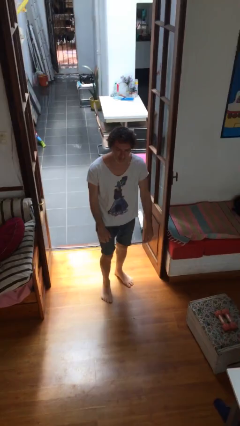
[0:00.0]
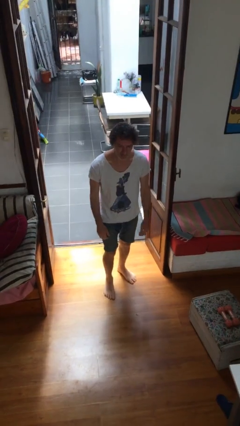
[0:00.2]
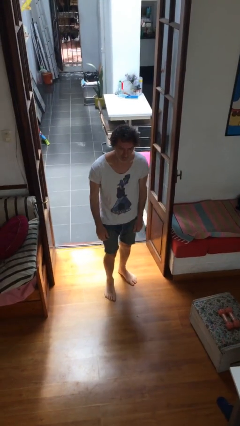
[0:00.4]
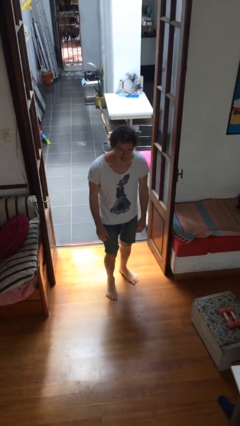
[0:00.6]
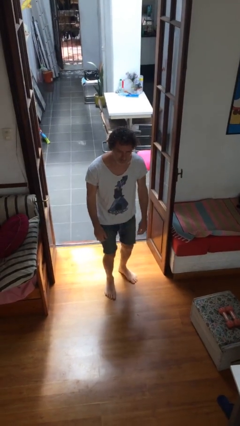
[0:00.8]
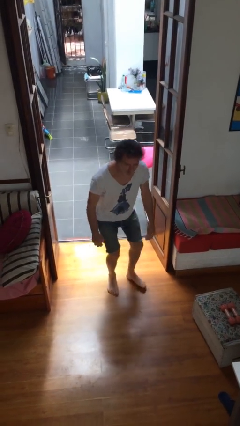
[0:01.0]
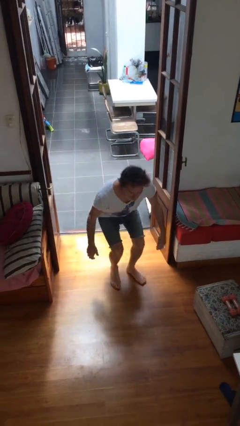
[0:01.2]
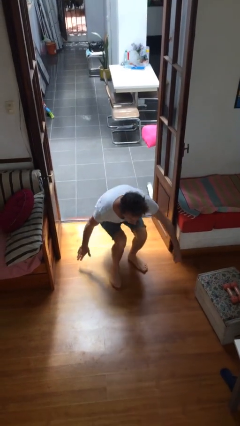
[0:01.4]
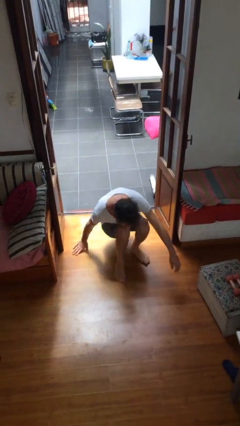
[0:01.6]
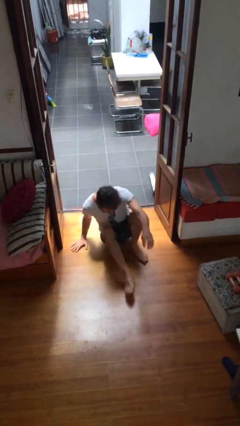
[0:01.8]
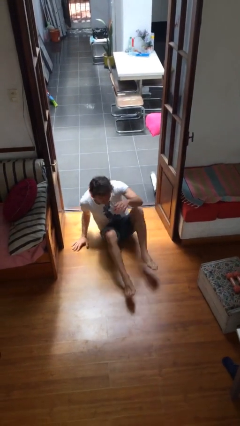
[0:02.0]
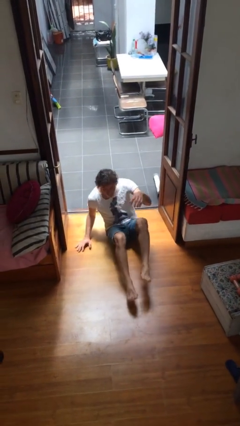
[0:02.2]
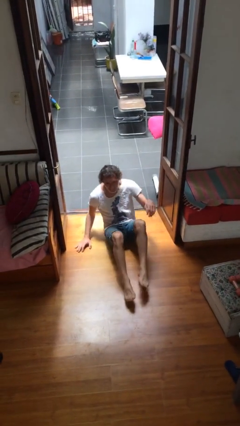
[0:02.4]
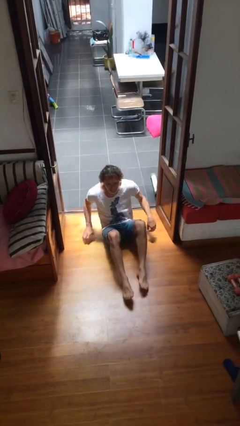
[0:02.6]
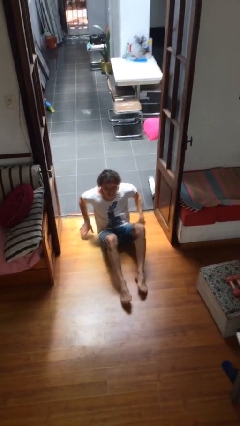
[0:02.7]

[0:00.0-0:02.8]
person sits down

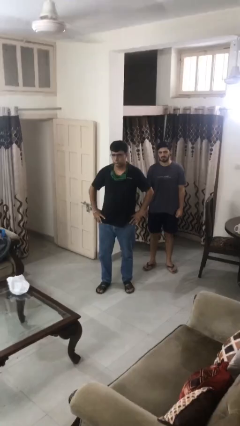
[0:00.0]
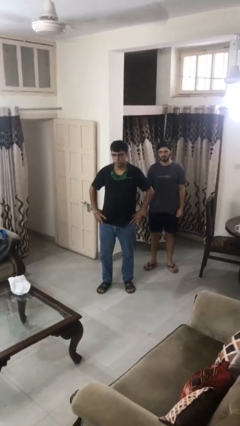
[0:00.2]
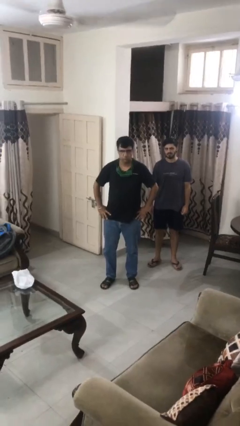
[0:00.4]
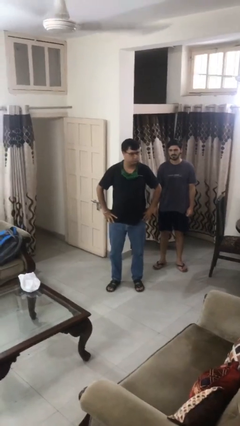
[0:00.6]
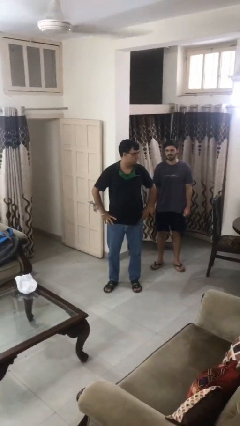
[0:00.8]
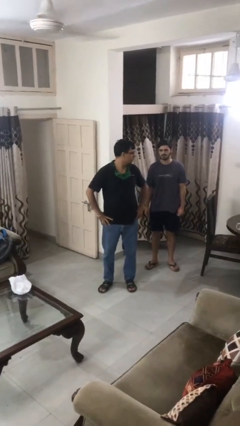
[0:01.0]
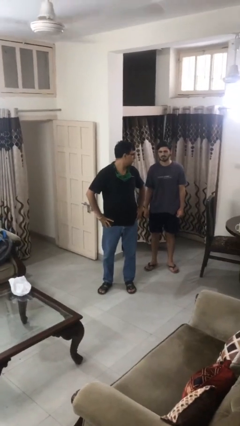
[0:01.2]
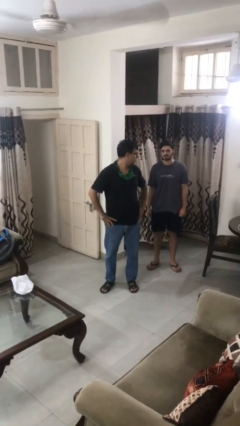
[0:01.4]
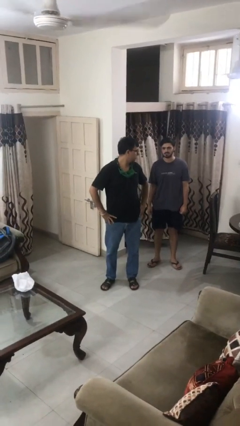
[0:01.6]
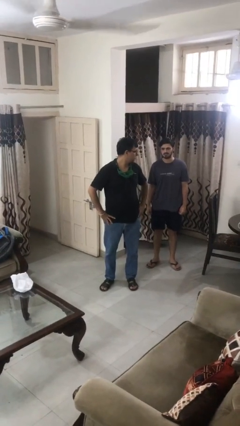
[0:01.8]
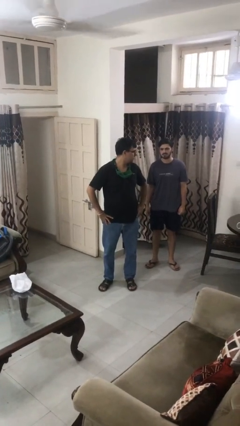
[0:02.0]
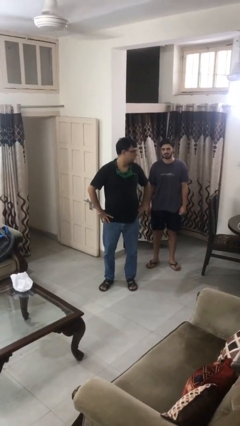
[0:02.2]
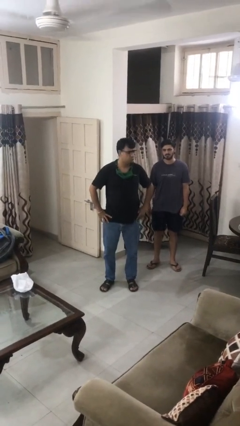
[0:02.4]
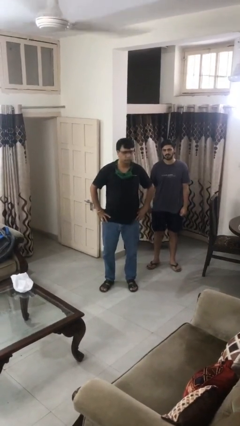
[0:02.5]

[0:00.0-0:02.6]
person looks over shoulder

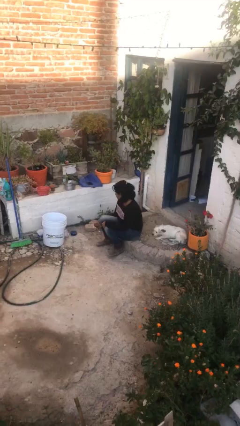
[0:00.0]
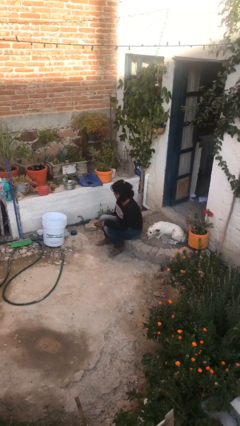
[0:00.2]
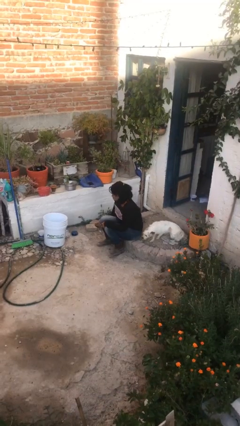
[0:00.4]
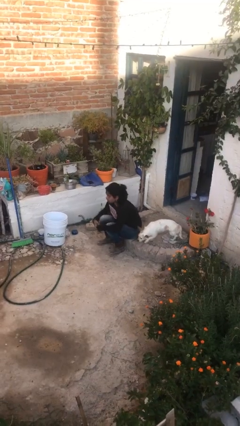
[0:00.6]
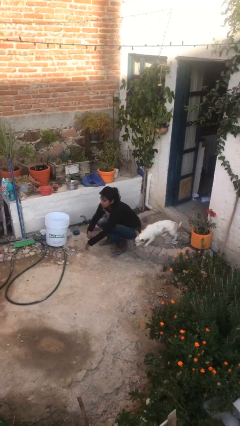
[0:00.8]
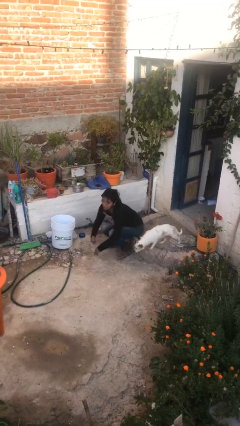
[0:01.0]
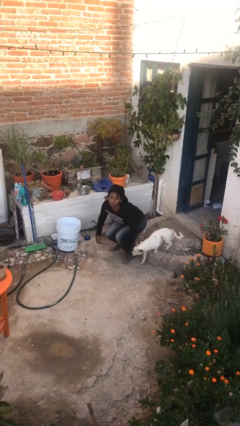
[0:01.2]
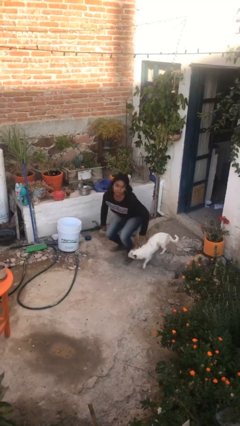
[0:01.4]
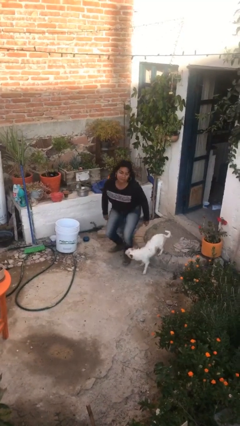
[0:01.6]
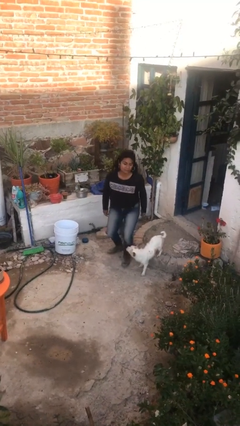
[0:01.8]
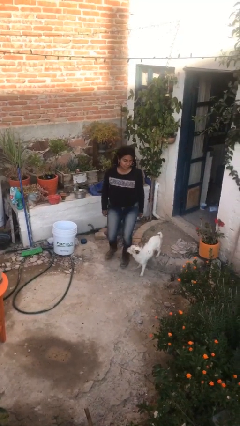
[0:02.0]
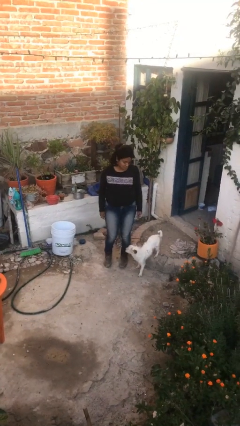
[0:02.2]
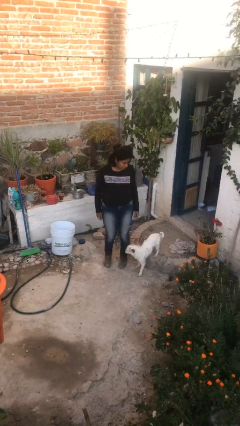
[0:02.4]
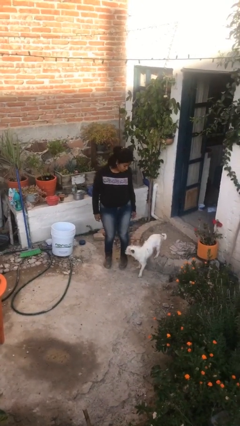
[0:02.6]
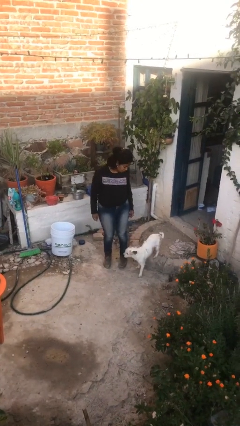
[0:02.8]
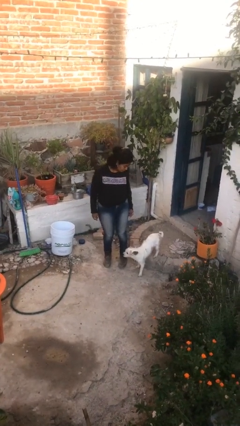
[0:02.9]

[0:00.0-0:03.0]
person stands up

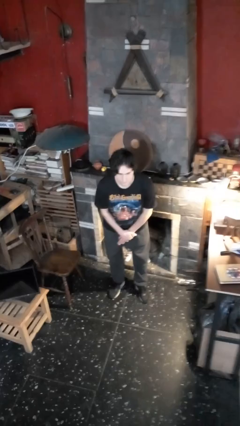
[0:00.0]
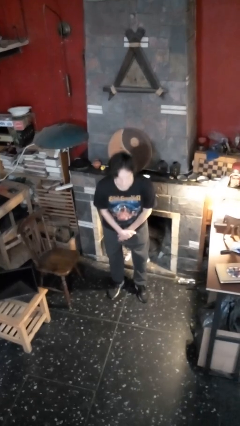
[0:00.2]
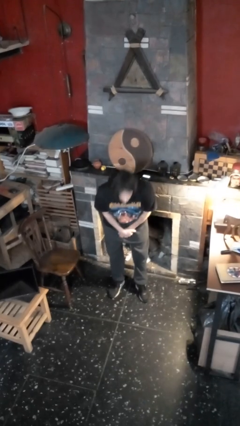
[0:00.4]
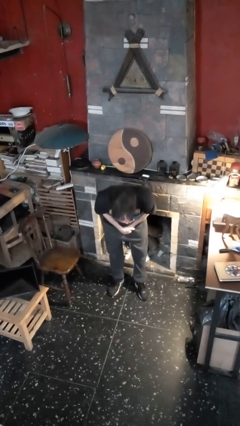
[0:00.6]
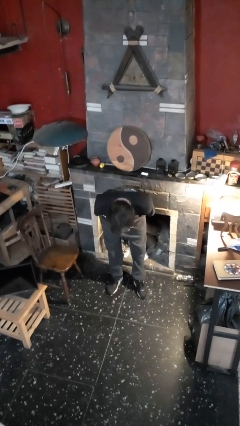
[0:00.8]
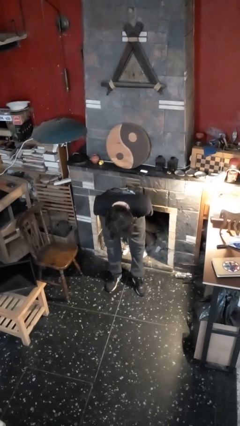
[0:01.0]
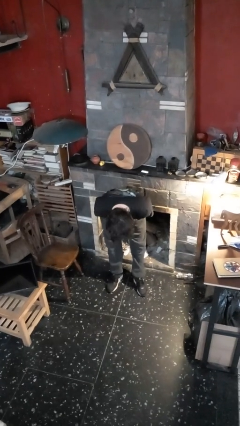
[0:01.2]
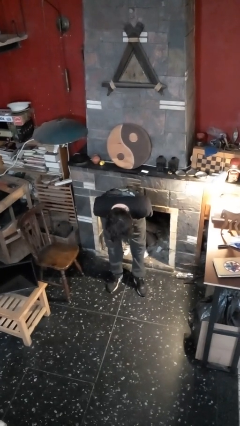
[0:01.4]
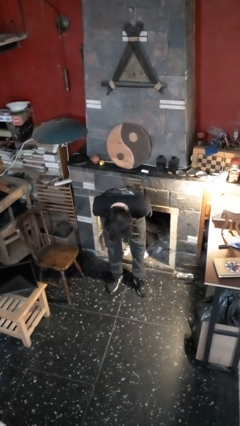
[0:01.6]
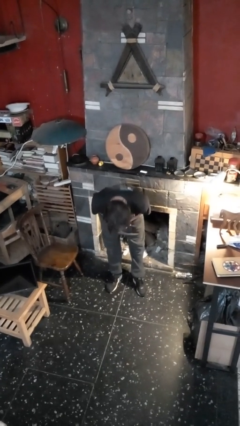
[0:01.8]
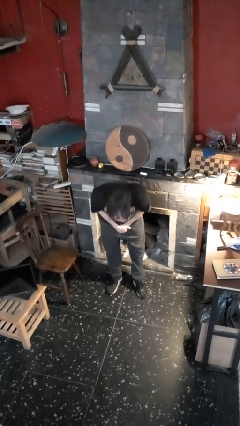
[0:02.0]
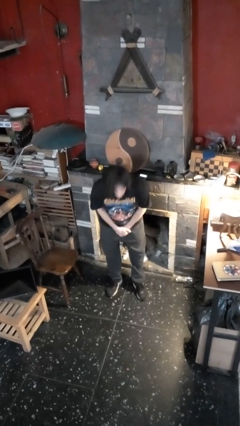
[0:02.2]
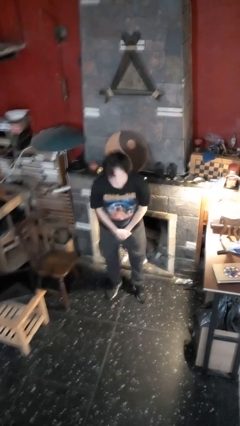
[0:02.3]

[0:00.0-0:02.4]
person bows

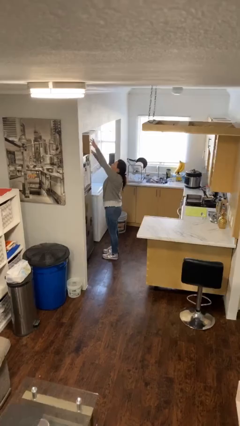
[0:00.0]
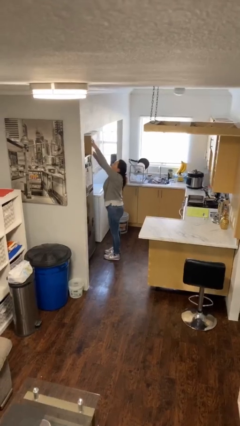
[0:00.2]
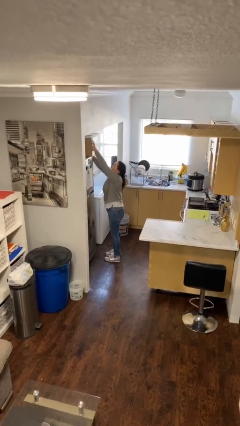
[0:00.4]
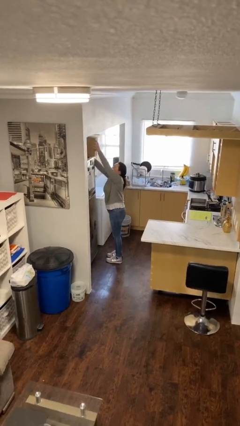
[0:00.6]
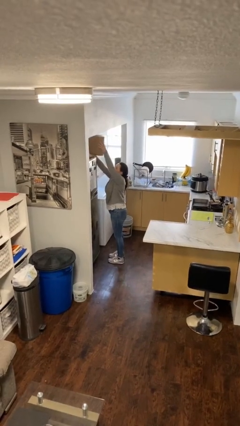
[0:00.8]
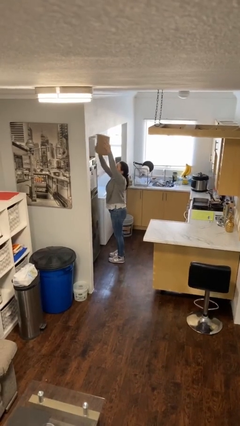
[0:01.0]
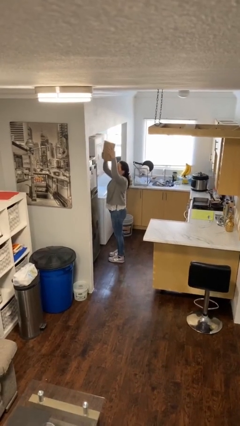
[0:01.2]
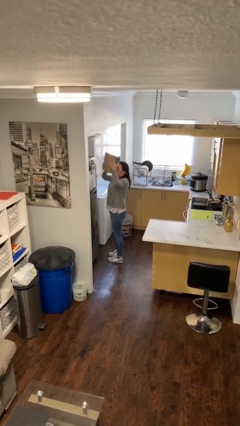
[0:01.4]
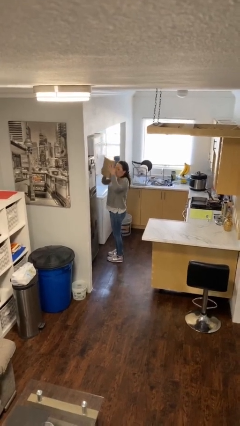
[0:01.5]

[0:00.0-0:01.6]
person picks up object from shelf

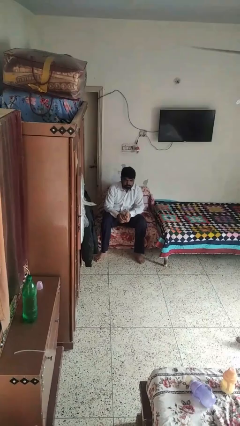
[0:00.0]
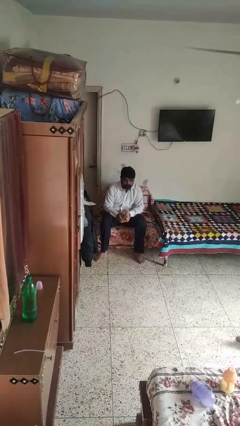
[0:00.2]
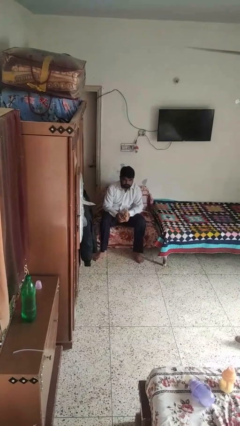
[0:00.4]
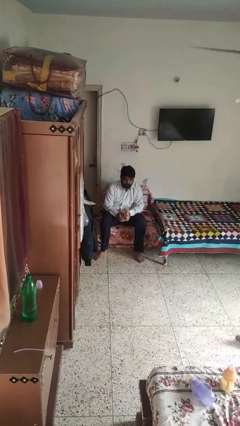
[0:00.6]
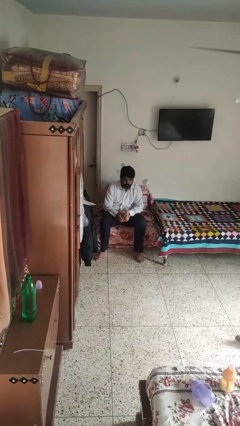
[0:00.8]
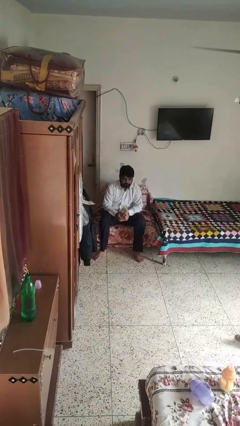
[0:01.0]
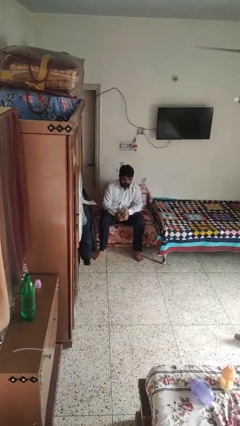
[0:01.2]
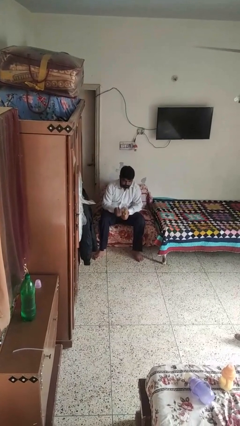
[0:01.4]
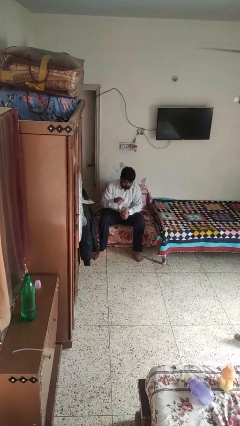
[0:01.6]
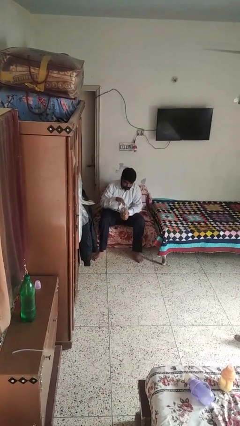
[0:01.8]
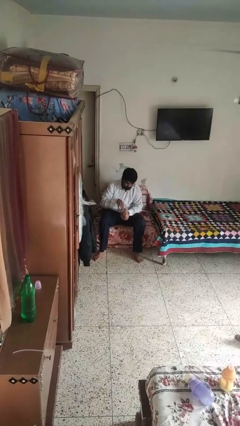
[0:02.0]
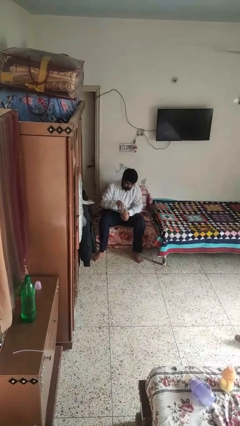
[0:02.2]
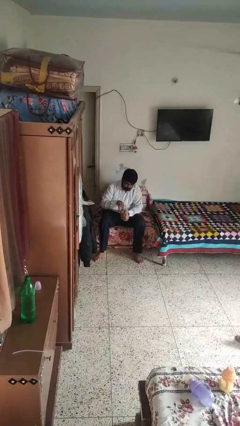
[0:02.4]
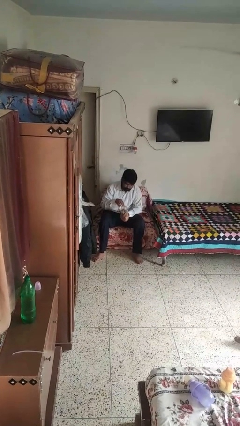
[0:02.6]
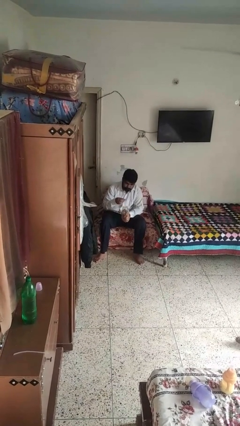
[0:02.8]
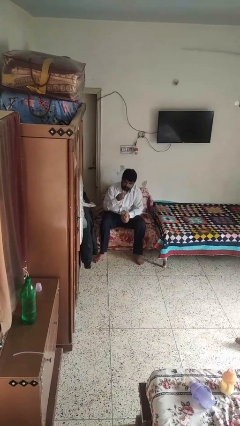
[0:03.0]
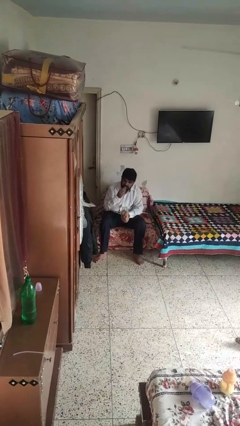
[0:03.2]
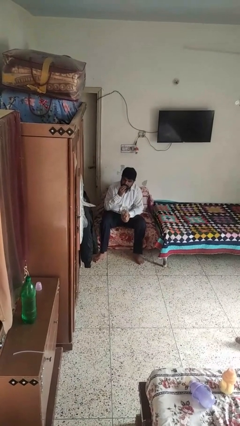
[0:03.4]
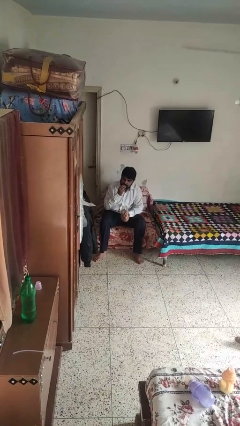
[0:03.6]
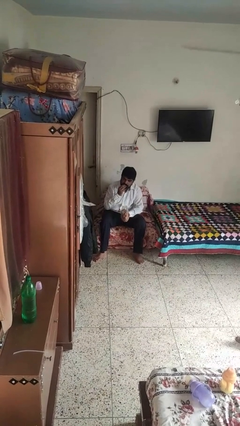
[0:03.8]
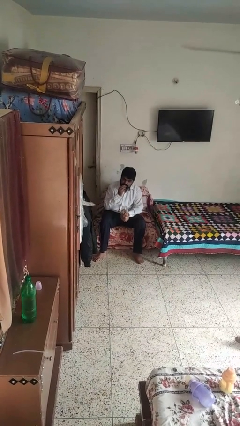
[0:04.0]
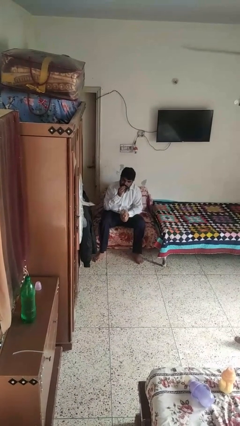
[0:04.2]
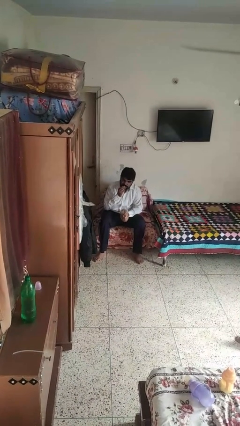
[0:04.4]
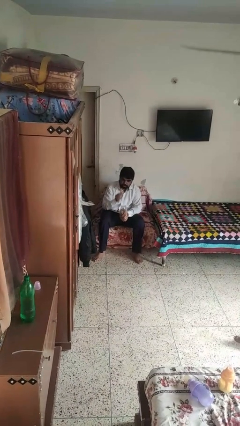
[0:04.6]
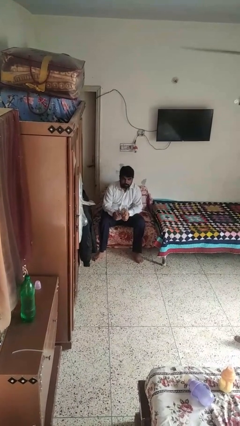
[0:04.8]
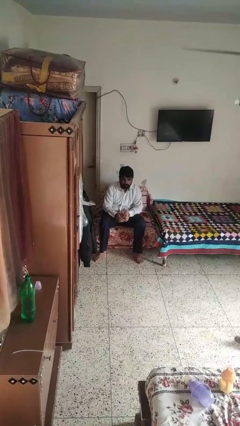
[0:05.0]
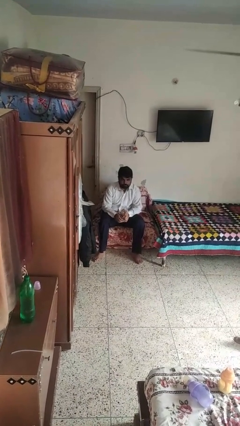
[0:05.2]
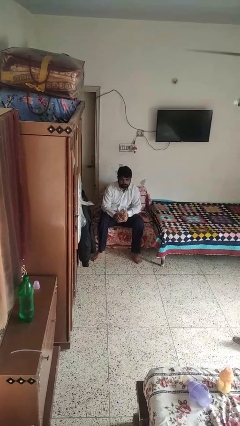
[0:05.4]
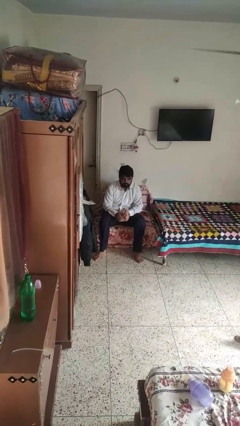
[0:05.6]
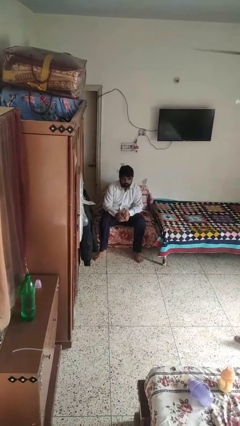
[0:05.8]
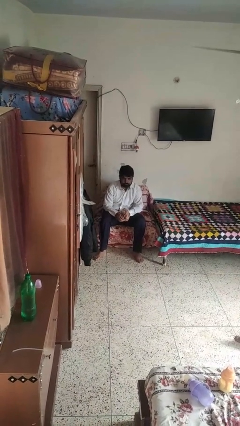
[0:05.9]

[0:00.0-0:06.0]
person eats snack from bag
